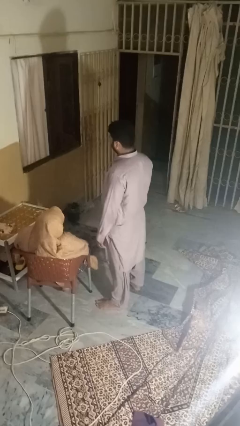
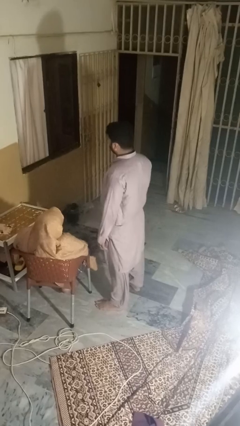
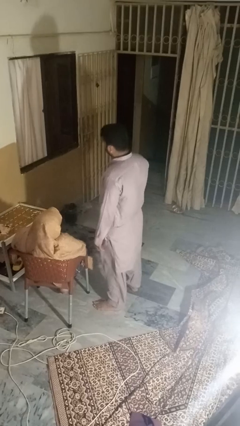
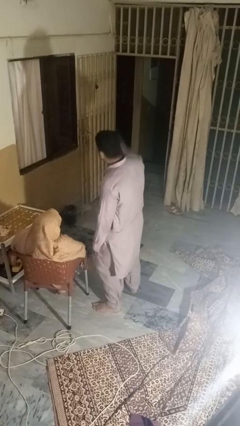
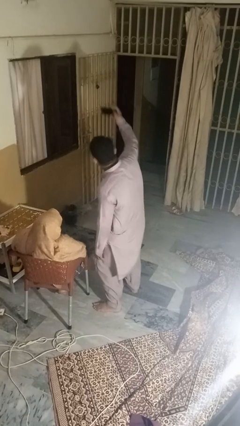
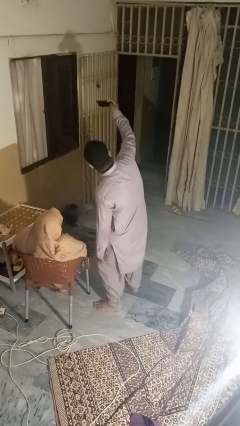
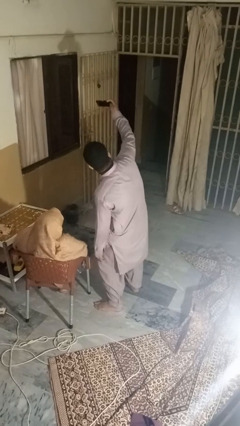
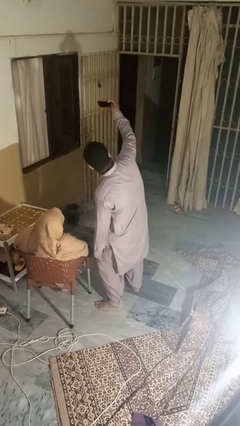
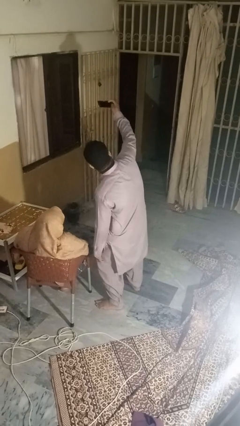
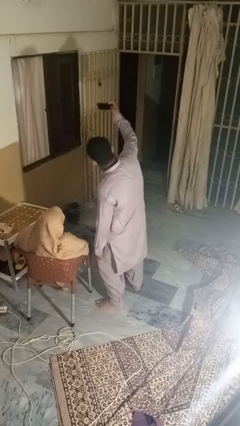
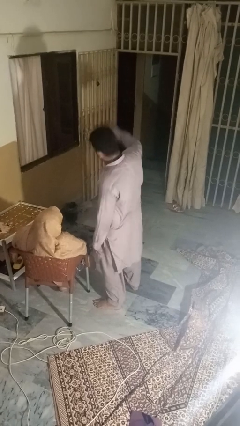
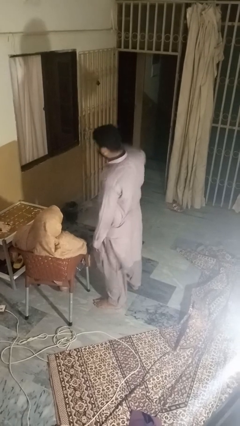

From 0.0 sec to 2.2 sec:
person takes selfie with person

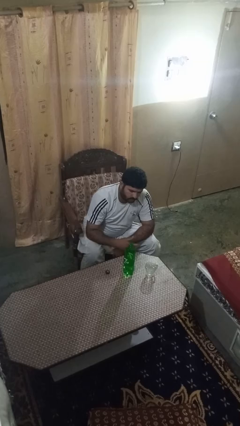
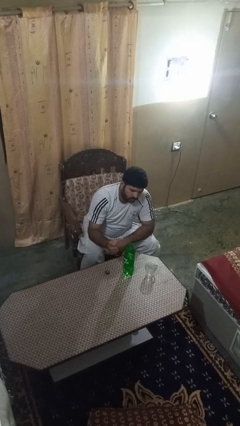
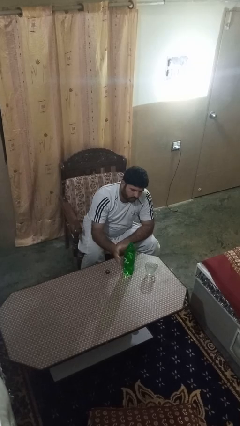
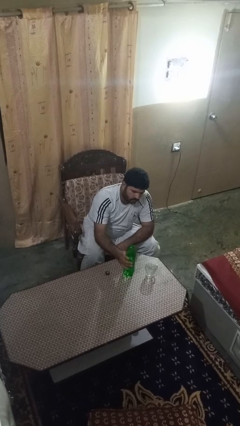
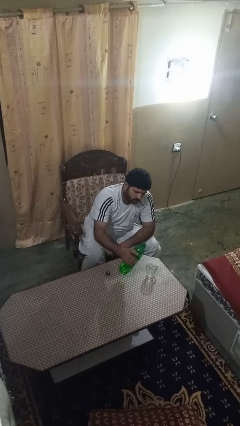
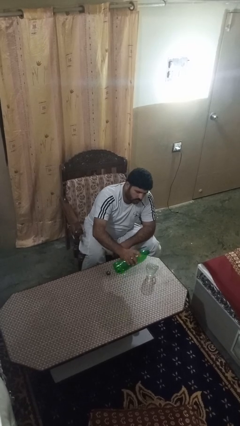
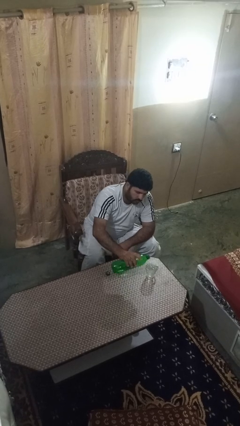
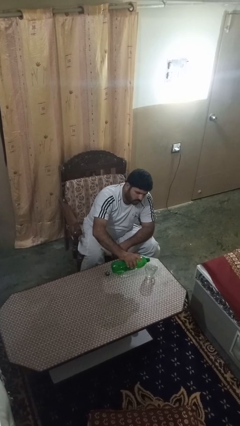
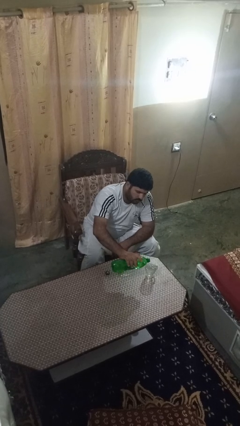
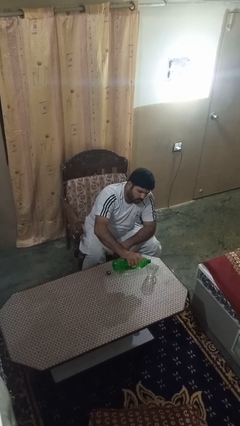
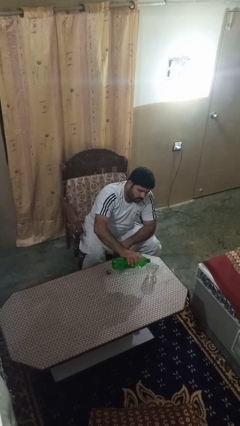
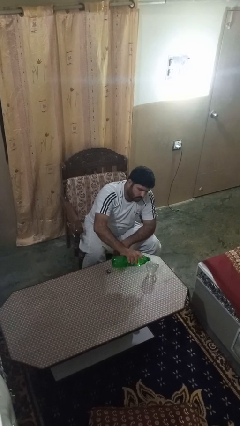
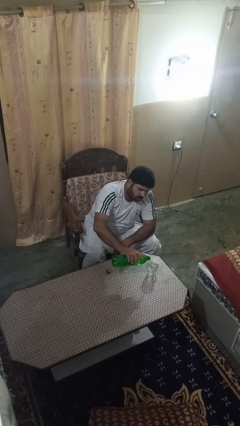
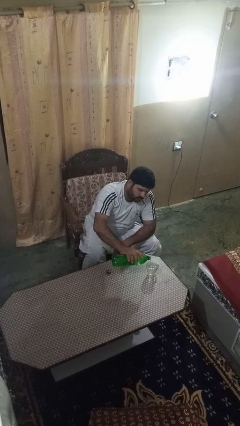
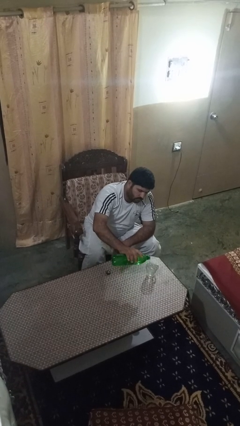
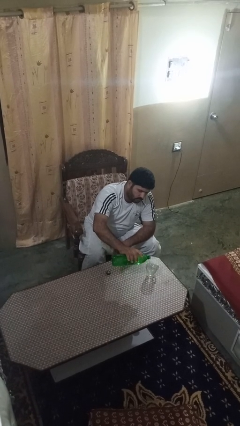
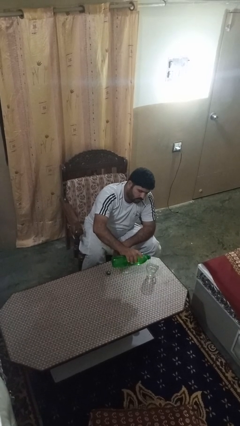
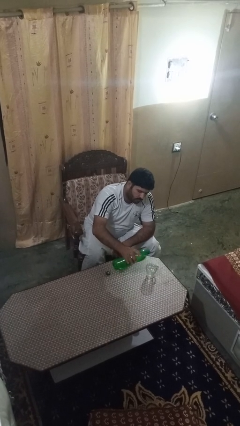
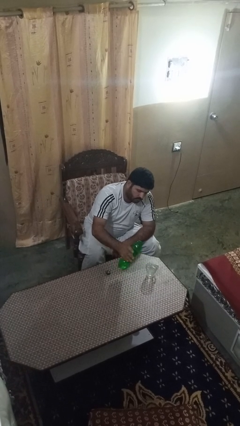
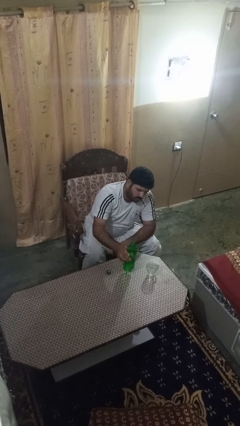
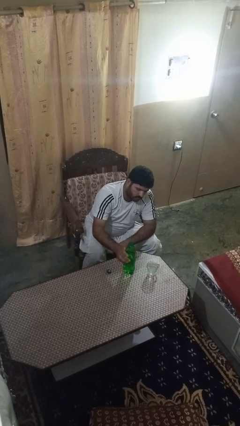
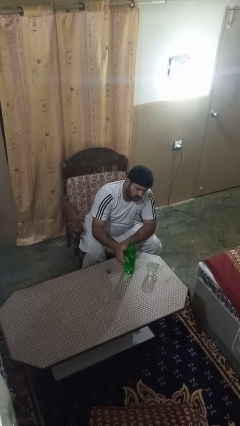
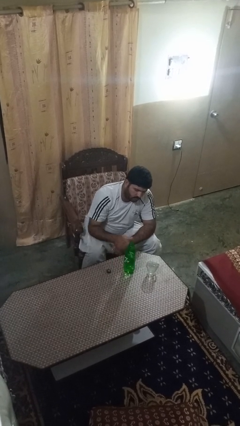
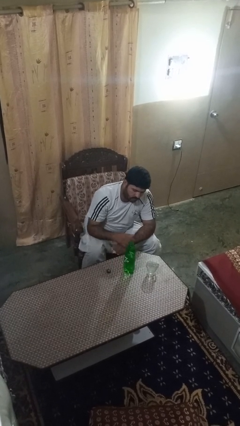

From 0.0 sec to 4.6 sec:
person pours liquid into cup

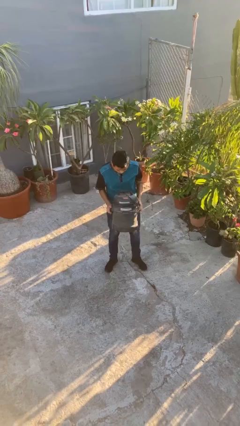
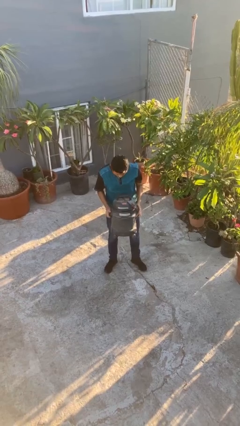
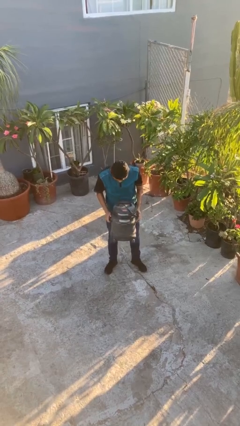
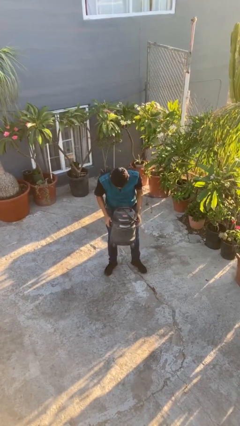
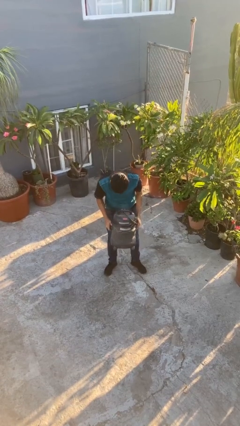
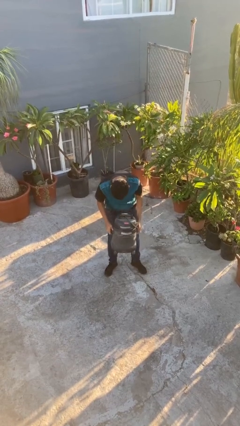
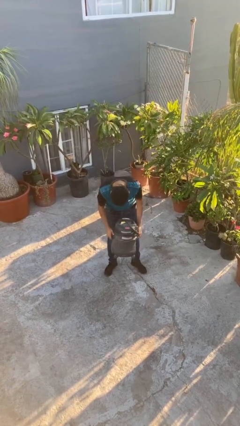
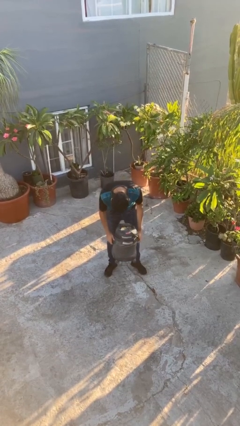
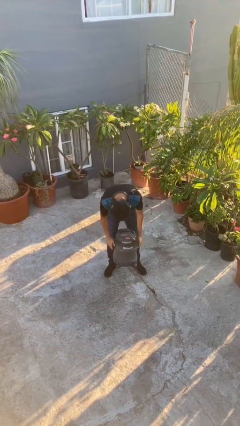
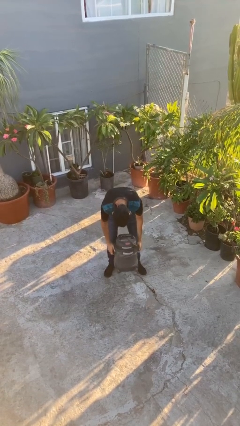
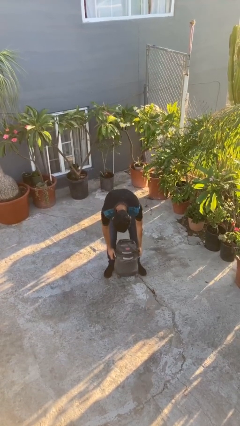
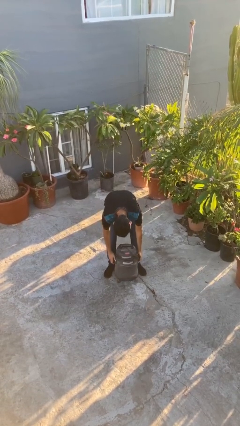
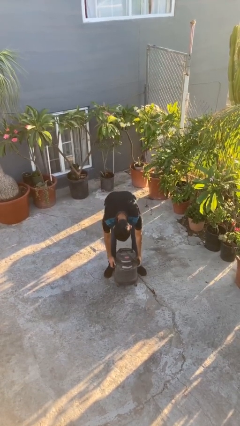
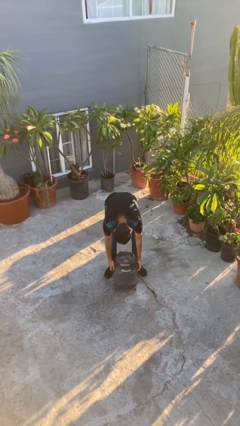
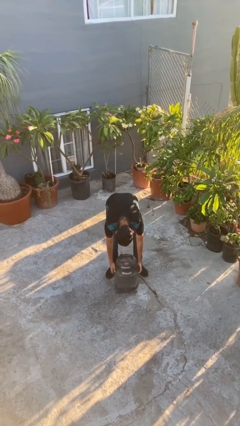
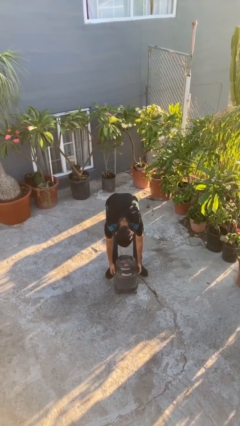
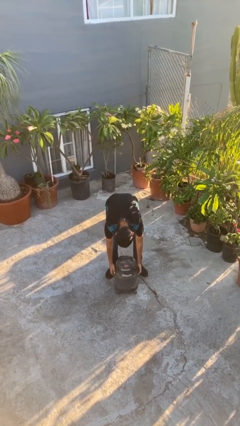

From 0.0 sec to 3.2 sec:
person puts down object on floor

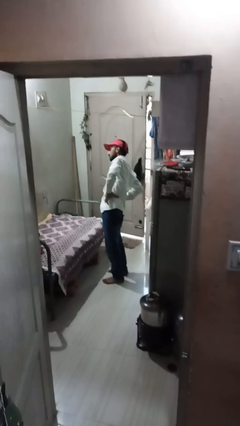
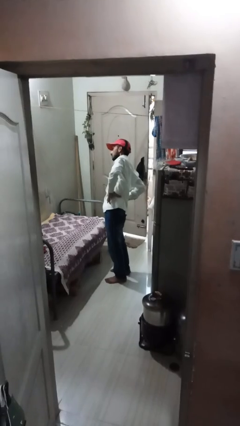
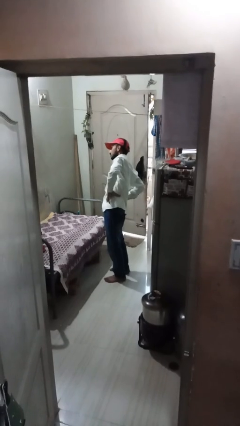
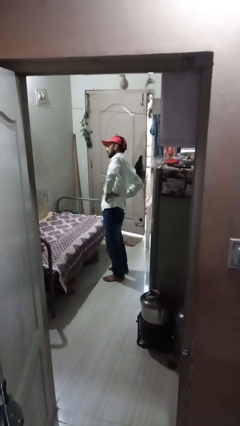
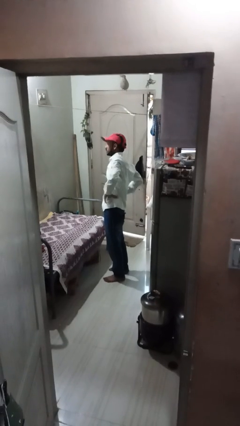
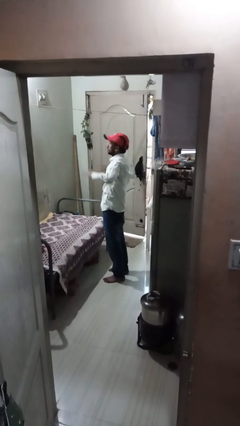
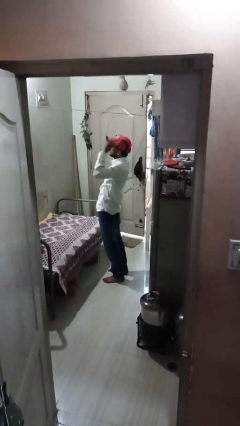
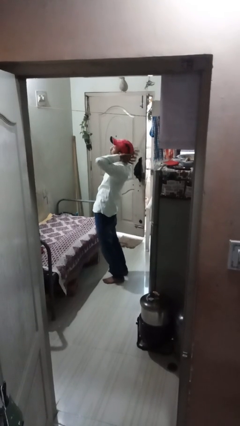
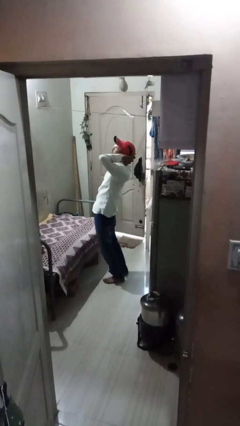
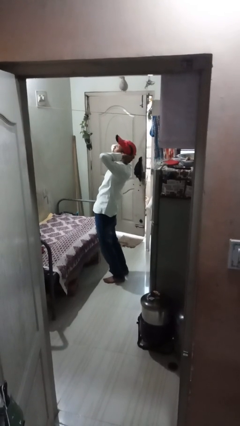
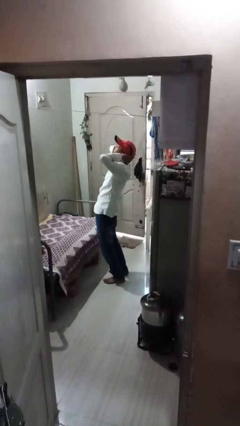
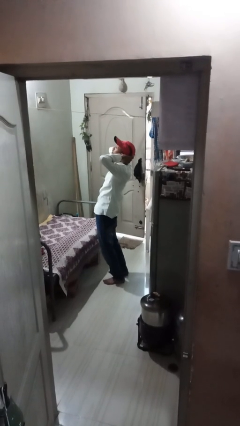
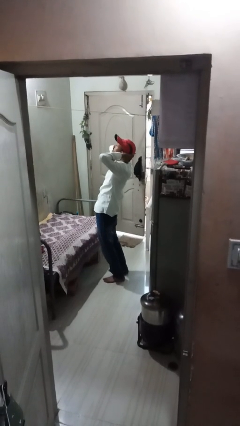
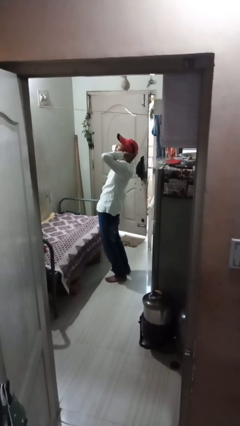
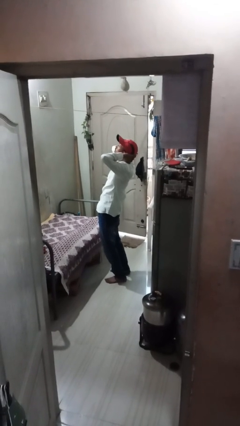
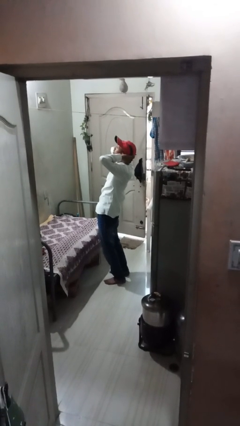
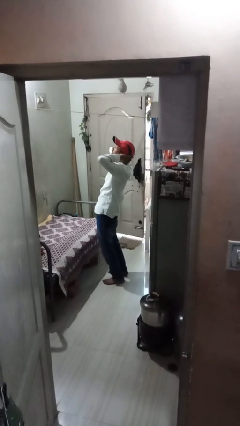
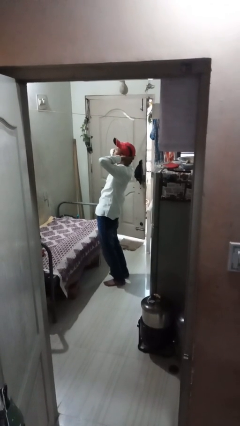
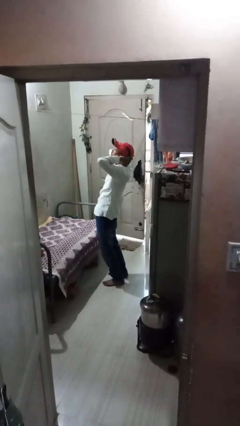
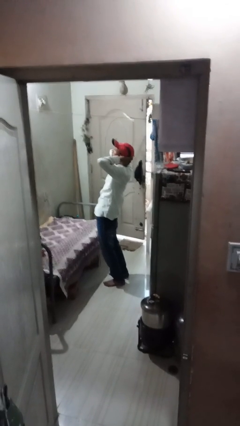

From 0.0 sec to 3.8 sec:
person stretches arms over head

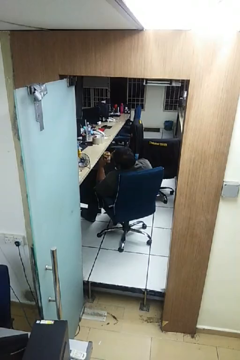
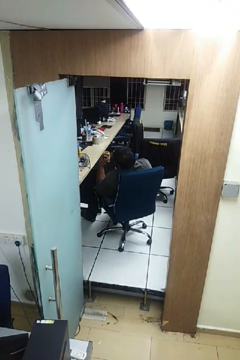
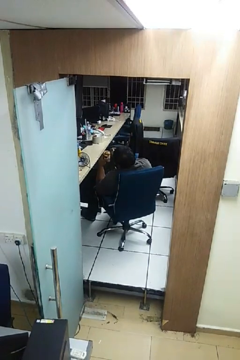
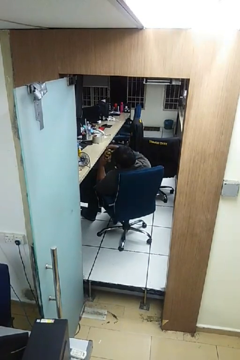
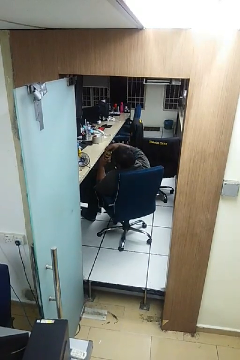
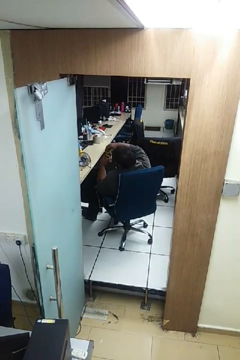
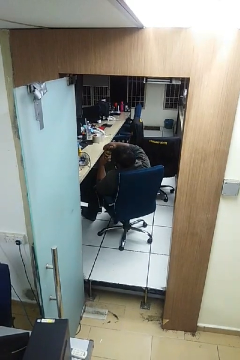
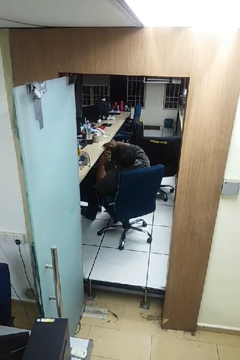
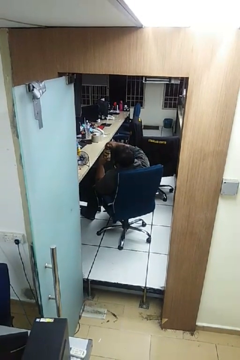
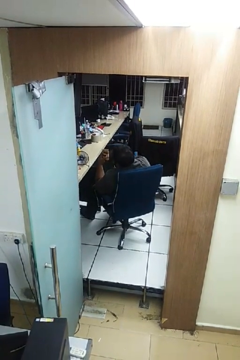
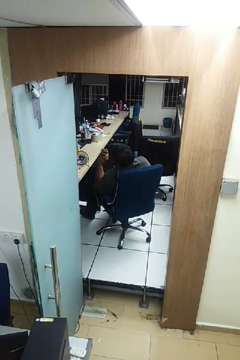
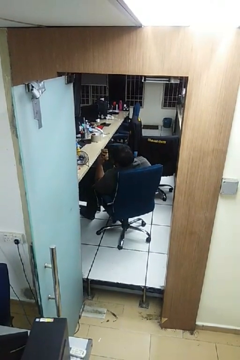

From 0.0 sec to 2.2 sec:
person closes jar

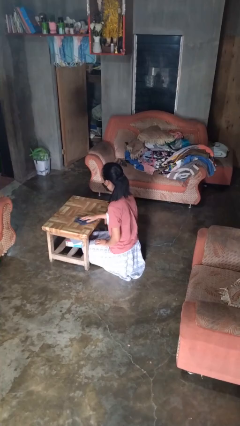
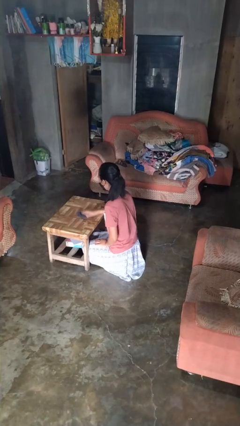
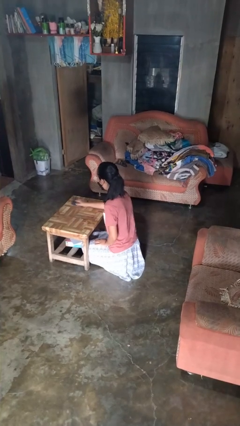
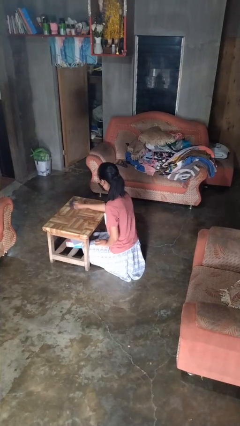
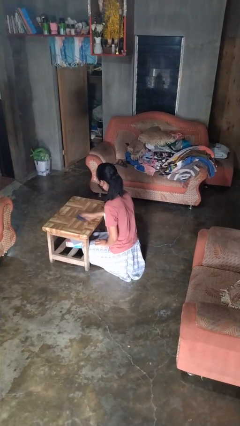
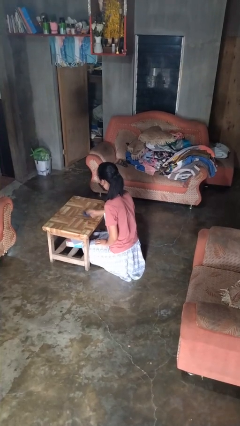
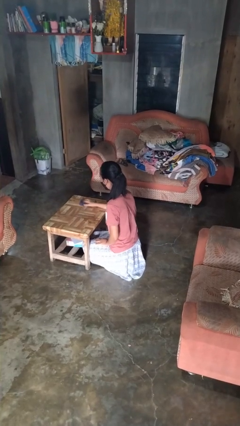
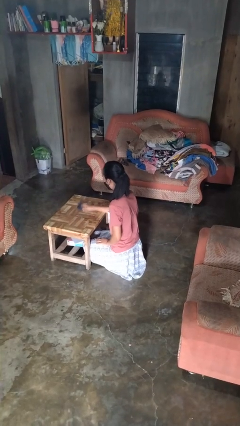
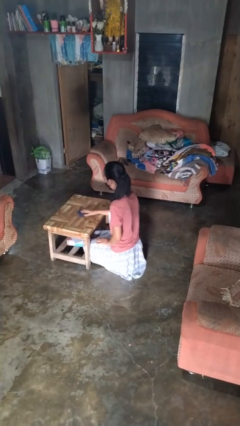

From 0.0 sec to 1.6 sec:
person cleans table with rag
